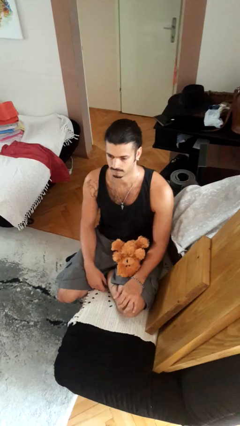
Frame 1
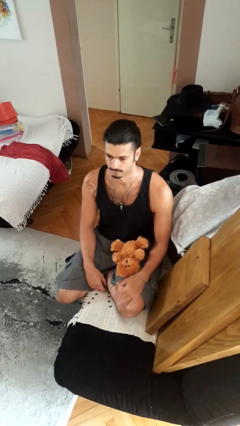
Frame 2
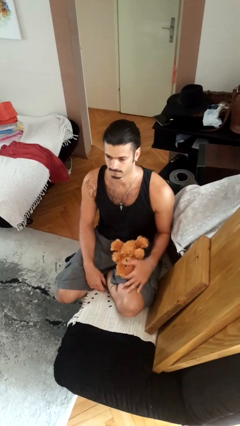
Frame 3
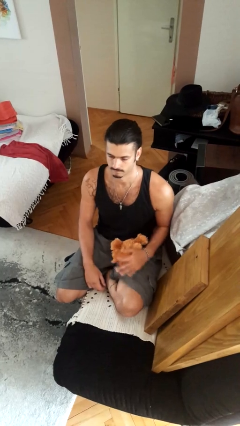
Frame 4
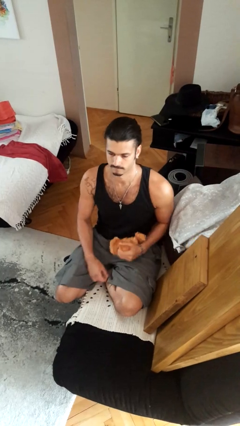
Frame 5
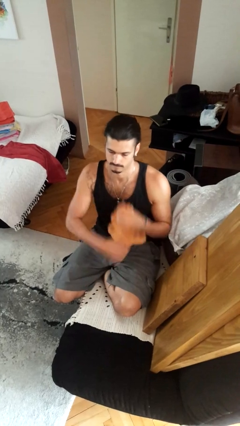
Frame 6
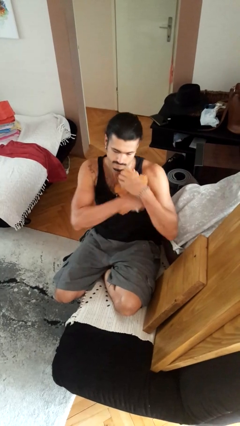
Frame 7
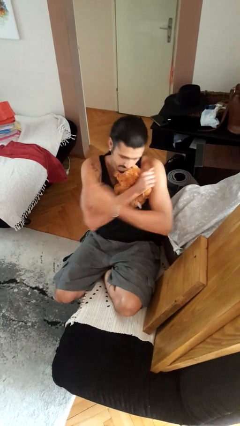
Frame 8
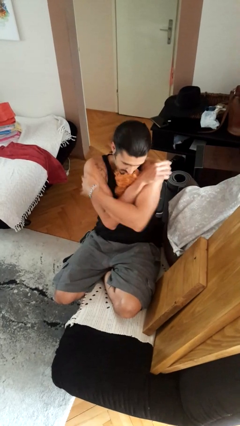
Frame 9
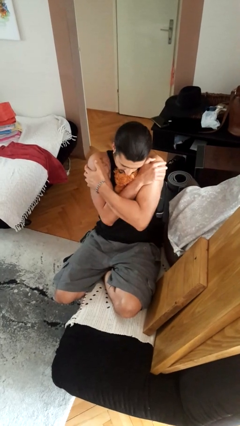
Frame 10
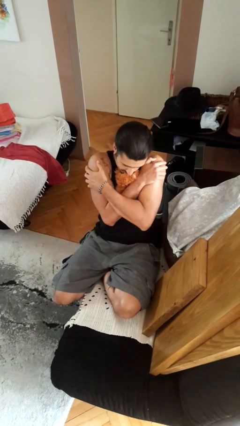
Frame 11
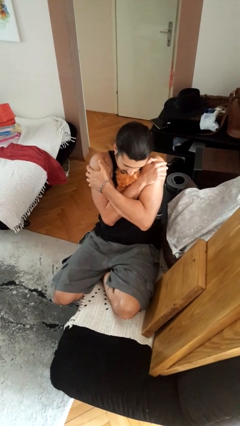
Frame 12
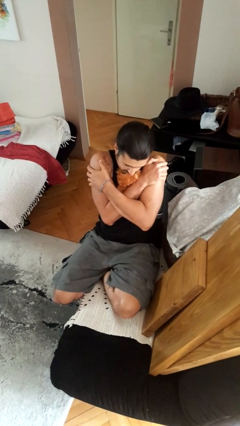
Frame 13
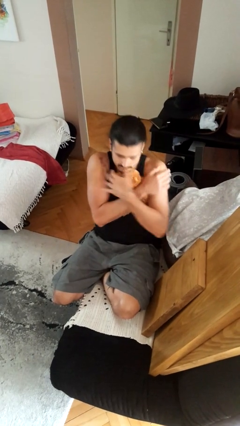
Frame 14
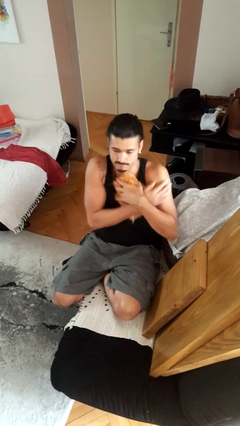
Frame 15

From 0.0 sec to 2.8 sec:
person hugs stuffed animal

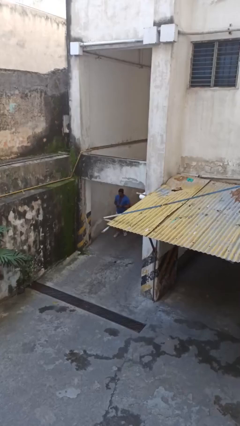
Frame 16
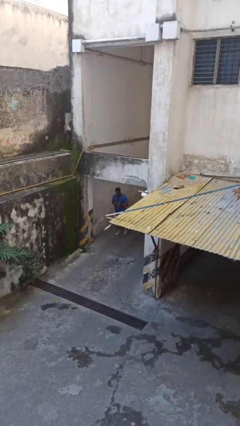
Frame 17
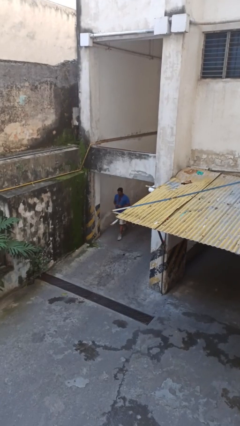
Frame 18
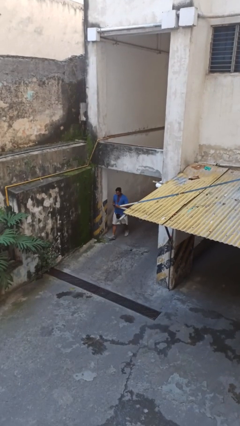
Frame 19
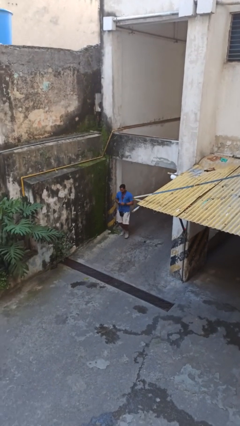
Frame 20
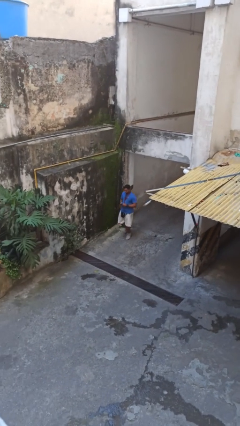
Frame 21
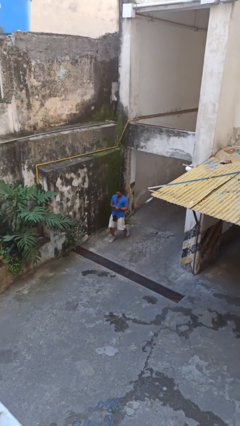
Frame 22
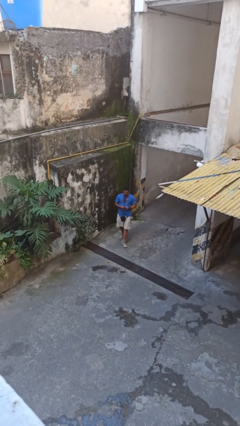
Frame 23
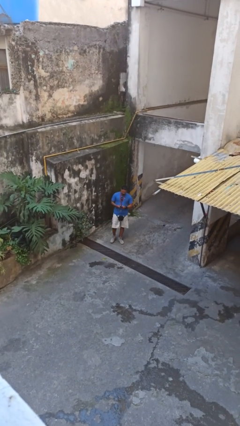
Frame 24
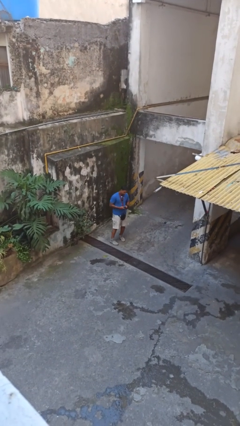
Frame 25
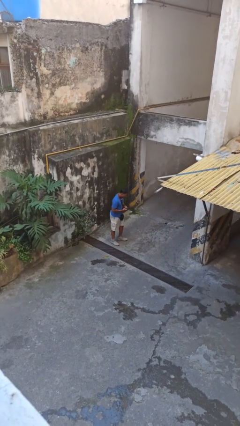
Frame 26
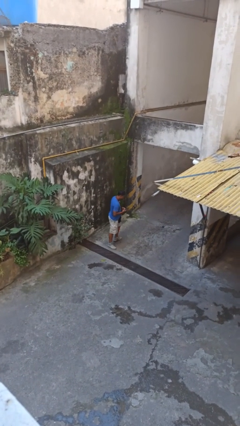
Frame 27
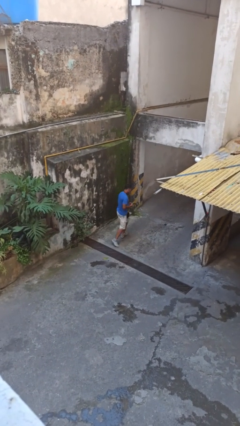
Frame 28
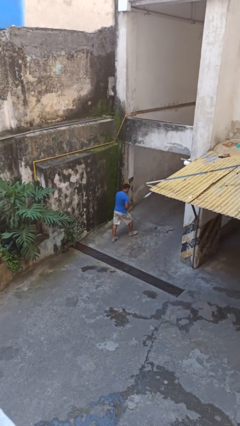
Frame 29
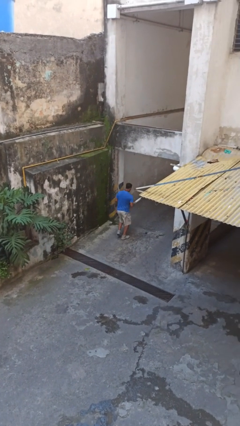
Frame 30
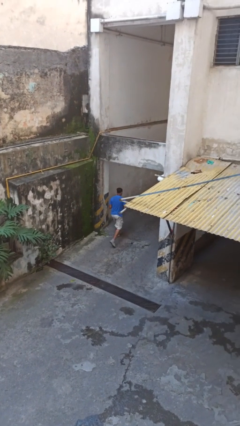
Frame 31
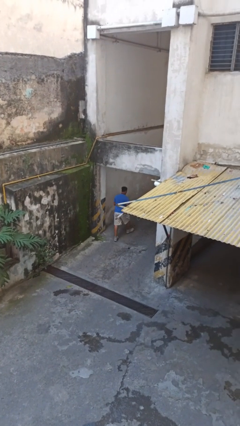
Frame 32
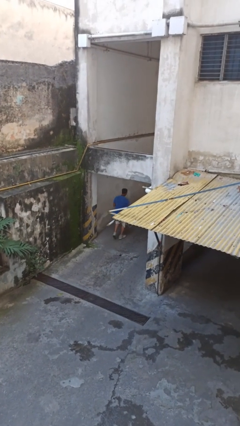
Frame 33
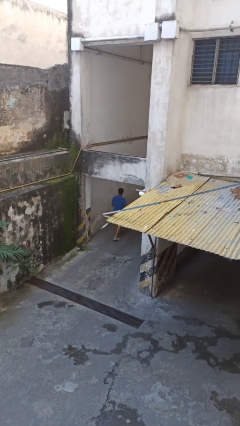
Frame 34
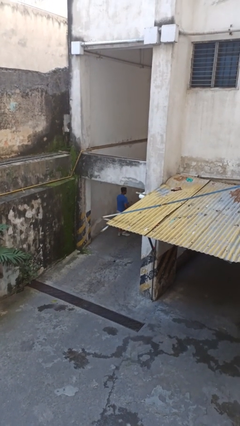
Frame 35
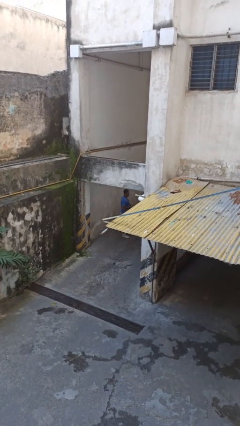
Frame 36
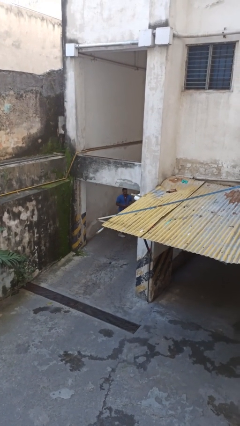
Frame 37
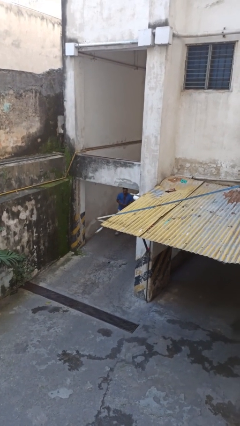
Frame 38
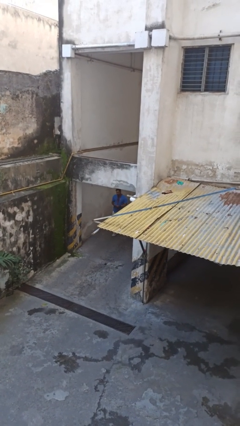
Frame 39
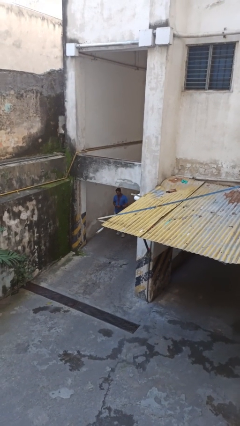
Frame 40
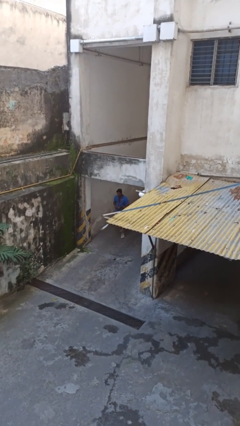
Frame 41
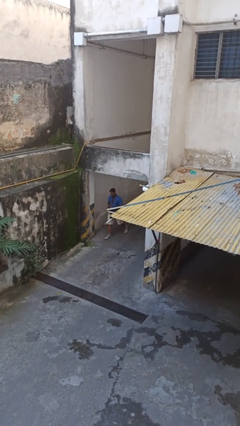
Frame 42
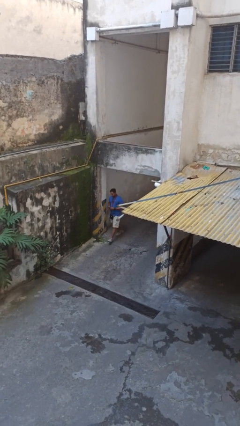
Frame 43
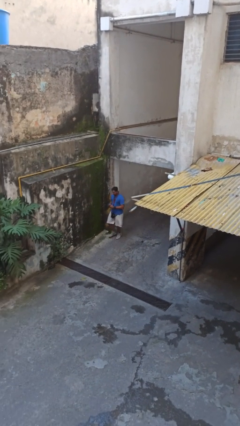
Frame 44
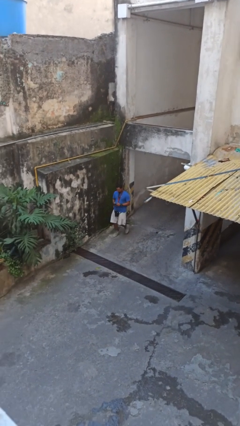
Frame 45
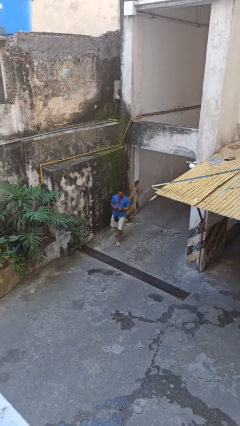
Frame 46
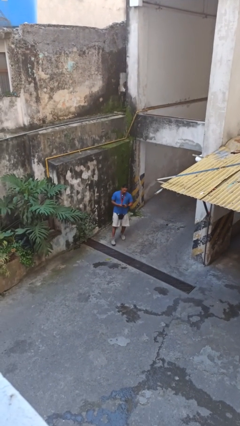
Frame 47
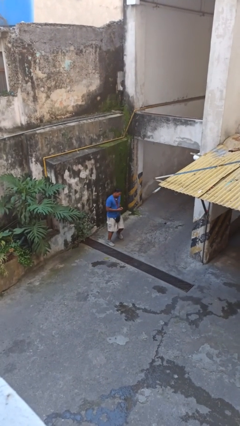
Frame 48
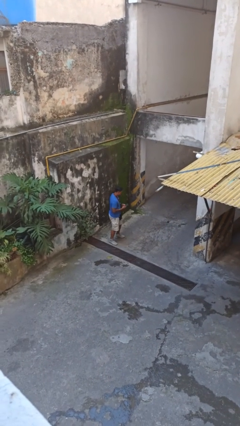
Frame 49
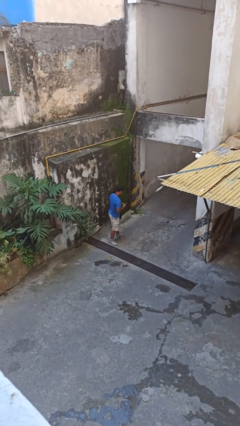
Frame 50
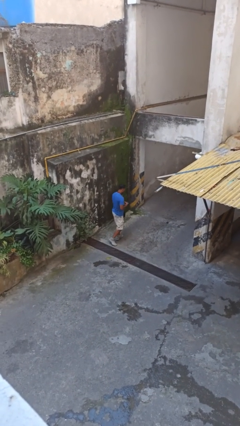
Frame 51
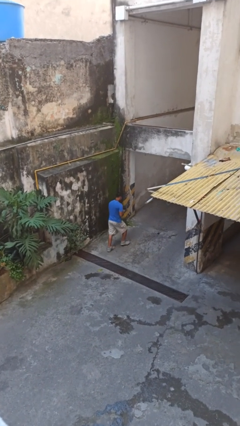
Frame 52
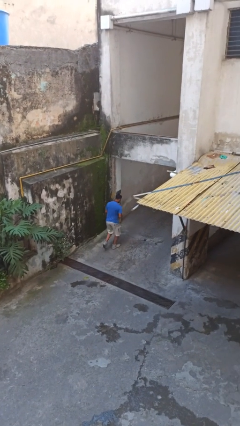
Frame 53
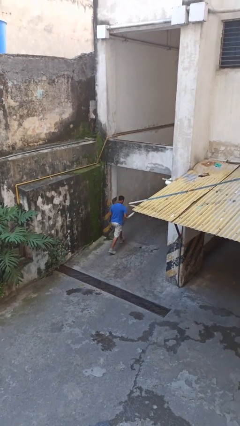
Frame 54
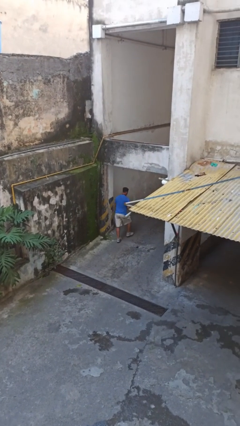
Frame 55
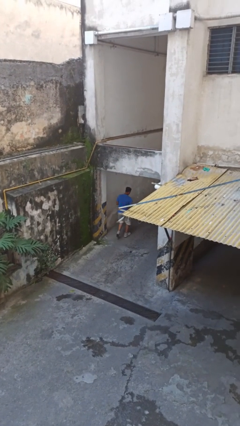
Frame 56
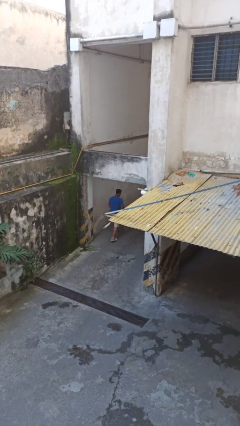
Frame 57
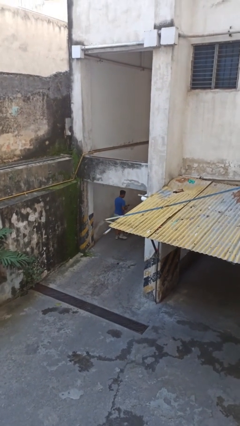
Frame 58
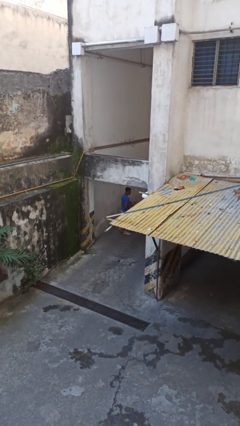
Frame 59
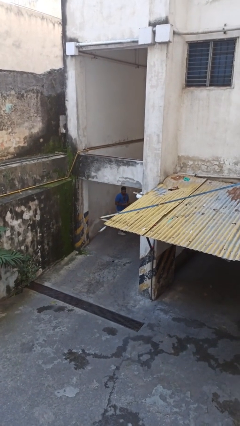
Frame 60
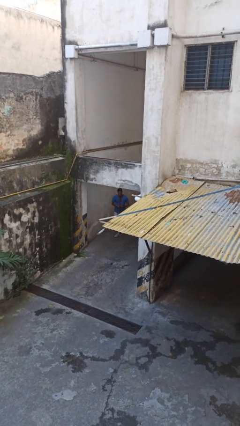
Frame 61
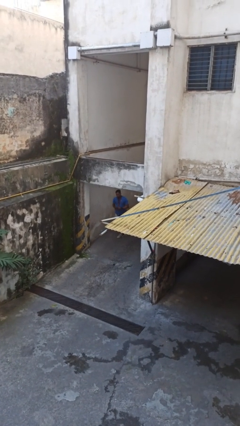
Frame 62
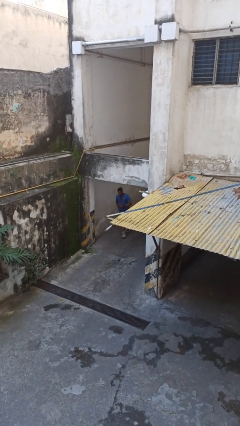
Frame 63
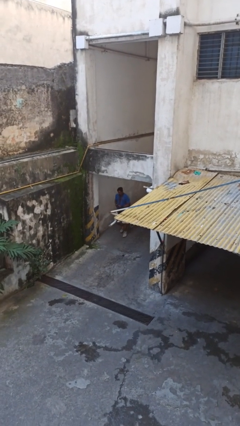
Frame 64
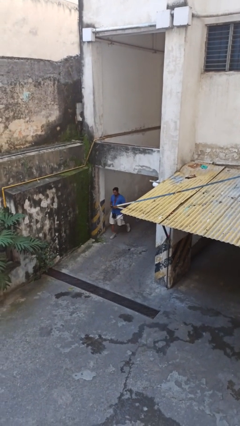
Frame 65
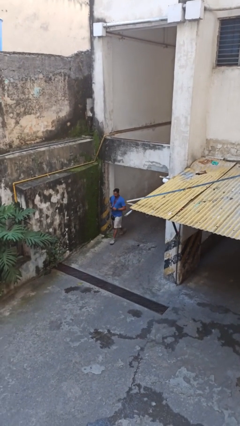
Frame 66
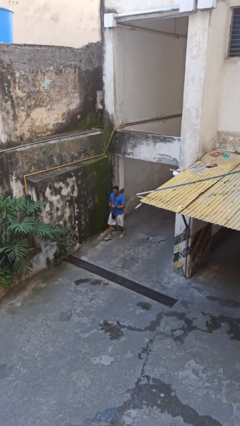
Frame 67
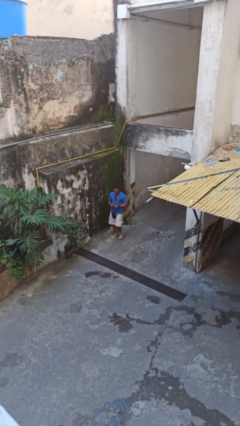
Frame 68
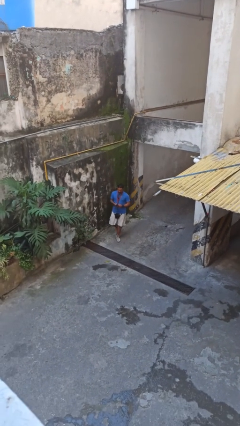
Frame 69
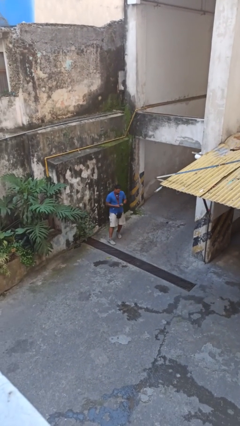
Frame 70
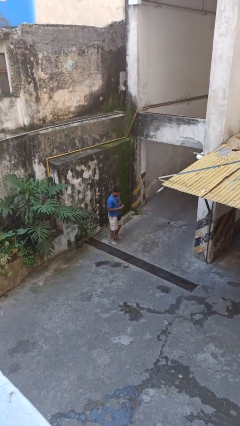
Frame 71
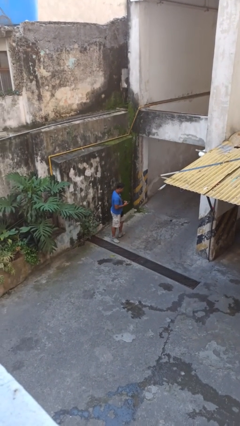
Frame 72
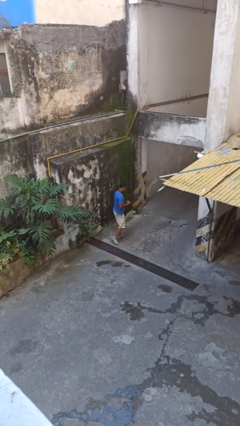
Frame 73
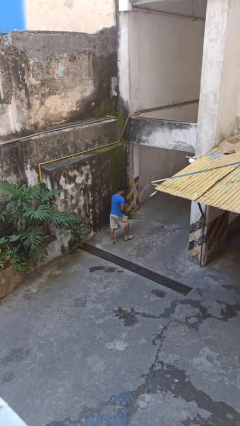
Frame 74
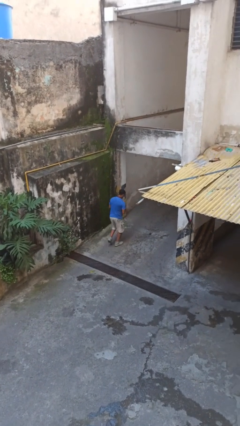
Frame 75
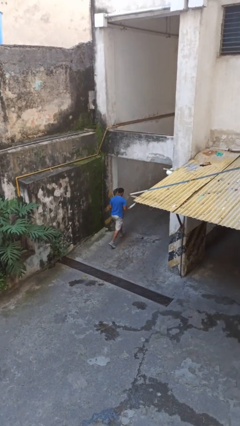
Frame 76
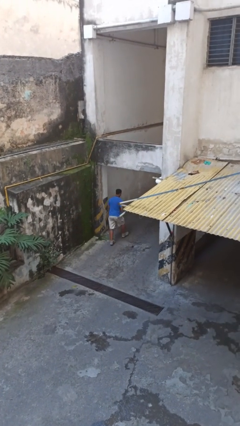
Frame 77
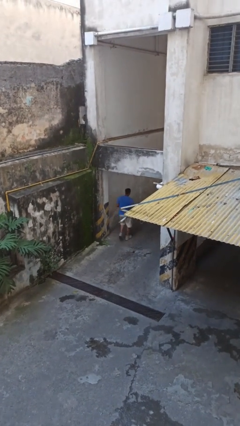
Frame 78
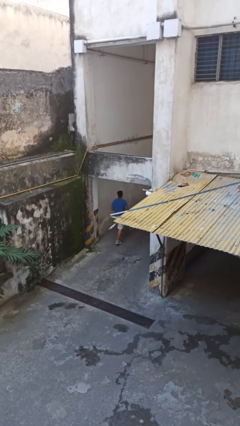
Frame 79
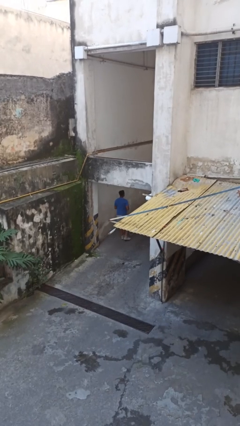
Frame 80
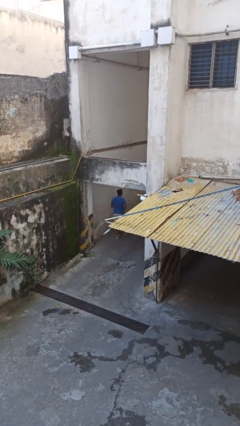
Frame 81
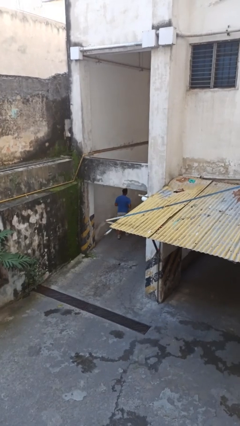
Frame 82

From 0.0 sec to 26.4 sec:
person texts on phone

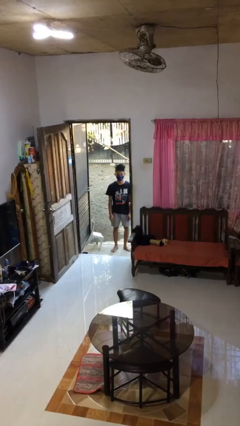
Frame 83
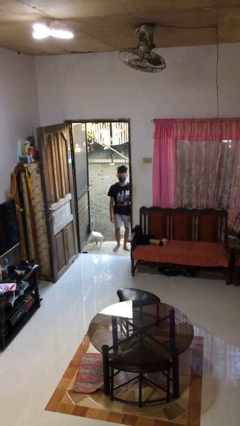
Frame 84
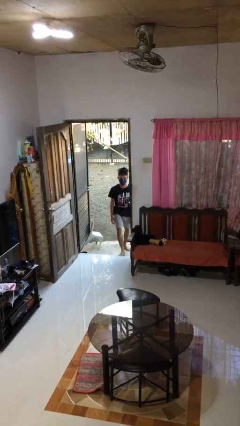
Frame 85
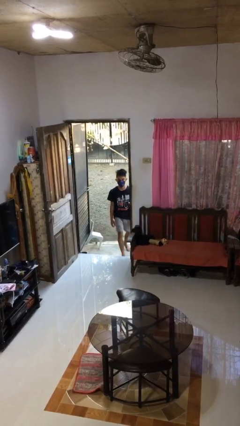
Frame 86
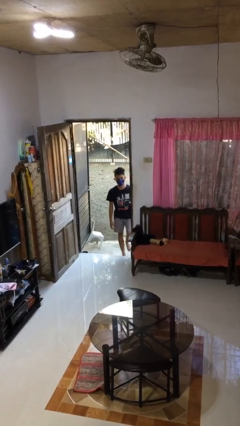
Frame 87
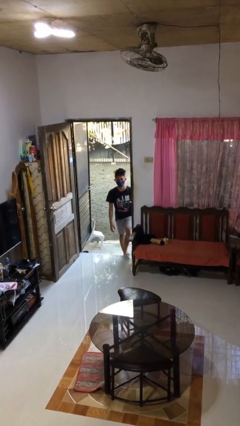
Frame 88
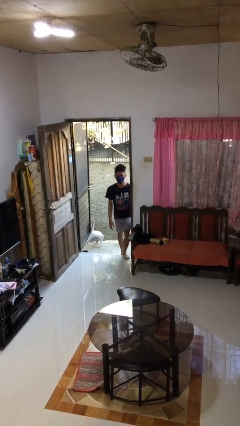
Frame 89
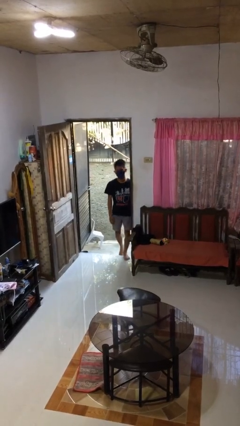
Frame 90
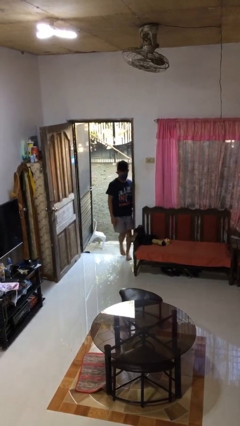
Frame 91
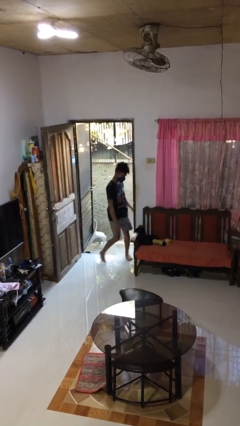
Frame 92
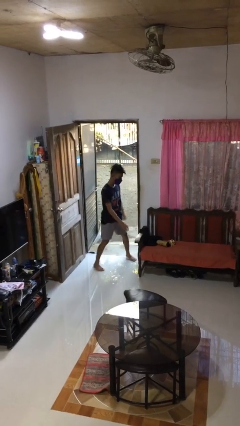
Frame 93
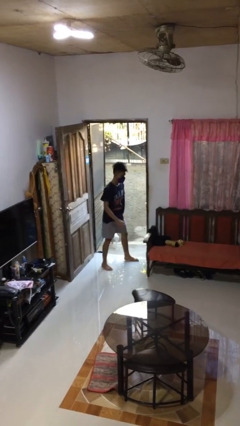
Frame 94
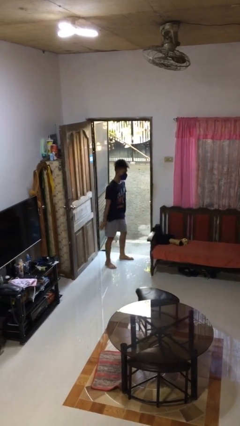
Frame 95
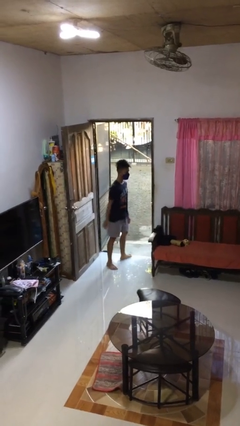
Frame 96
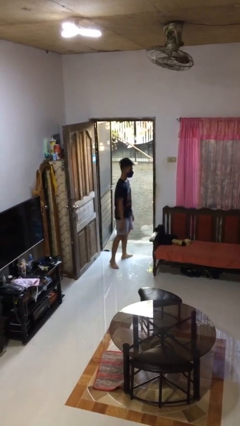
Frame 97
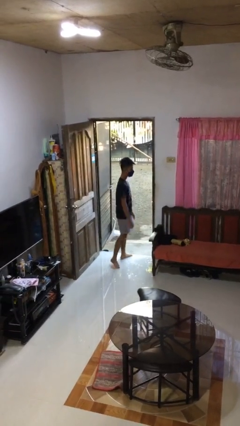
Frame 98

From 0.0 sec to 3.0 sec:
person bumps into wall
